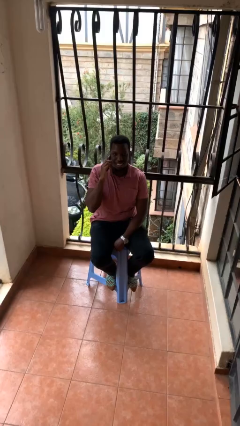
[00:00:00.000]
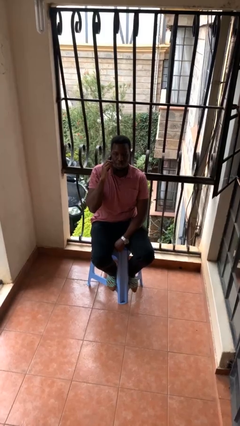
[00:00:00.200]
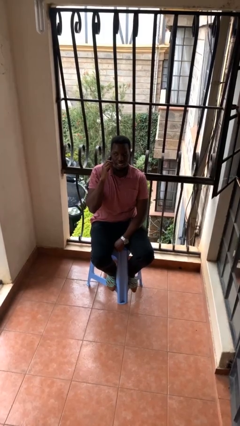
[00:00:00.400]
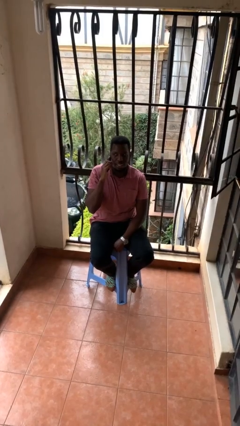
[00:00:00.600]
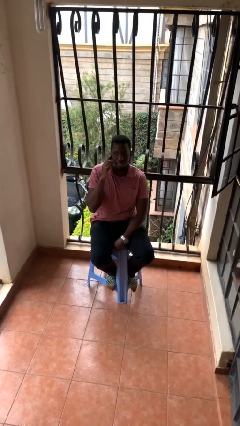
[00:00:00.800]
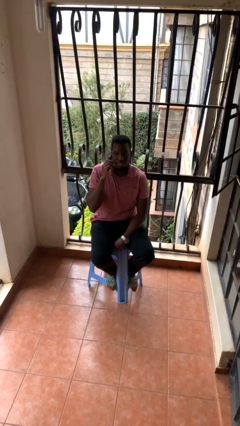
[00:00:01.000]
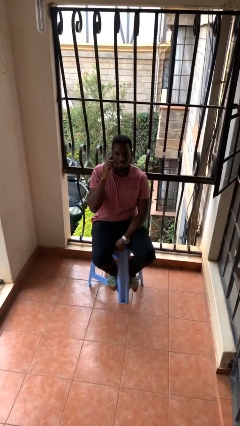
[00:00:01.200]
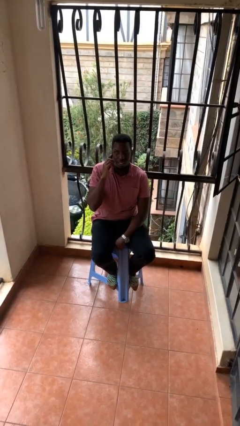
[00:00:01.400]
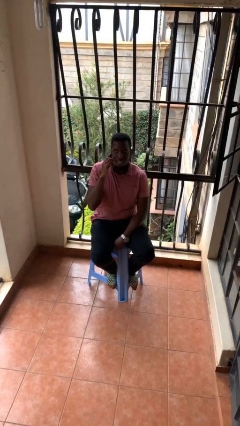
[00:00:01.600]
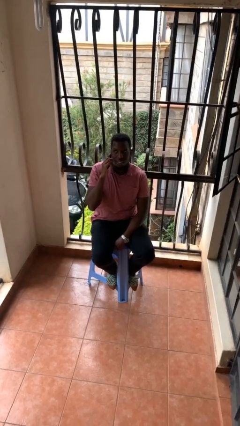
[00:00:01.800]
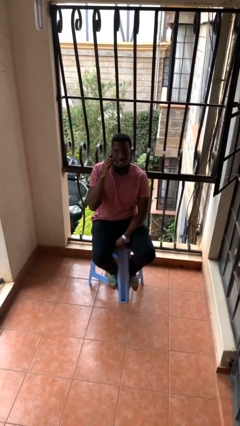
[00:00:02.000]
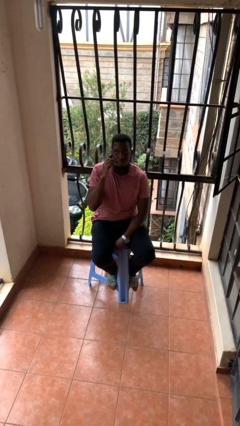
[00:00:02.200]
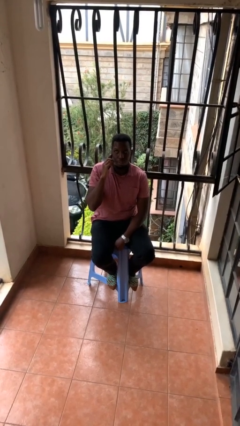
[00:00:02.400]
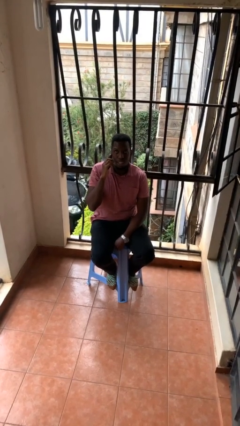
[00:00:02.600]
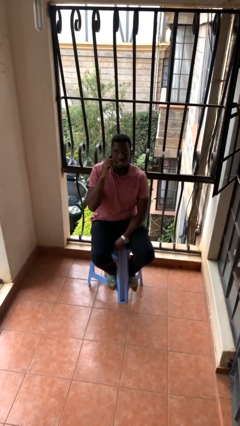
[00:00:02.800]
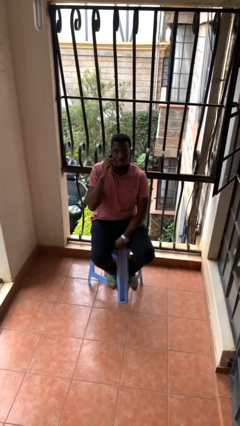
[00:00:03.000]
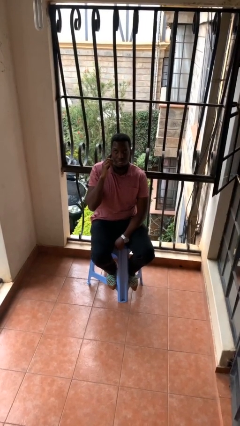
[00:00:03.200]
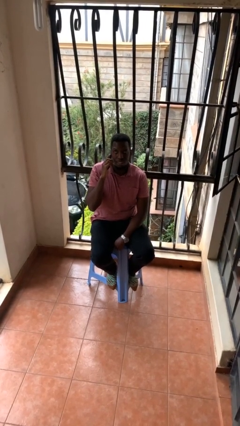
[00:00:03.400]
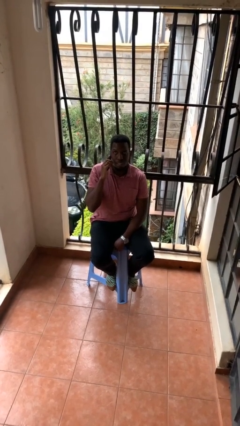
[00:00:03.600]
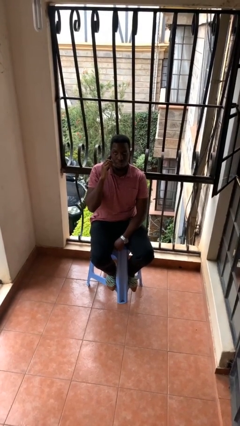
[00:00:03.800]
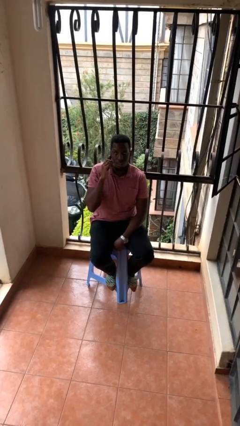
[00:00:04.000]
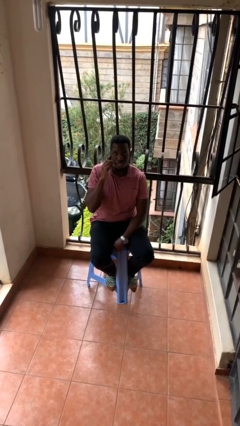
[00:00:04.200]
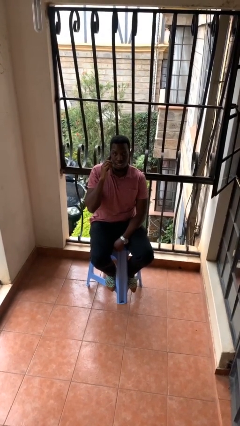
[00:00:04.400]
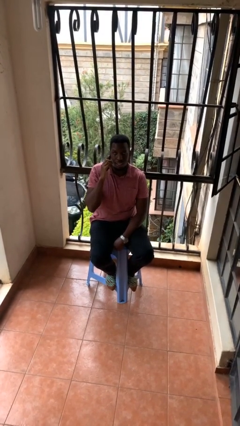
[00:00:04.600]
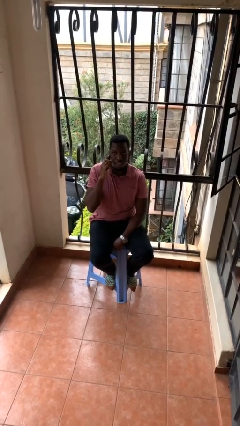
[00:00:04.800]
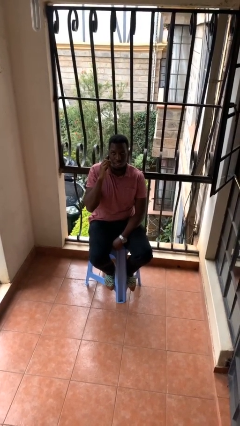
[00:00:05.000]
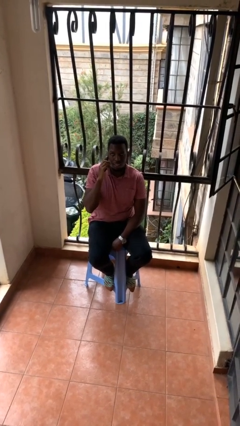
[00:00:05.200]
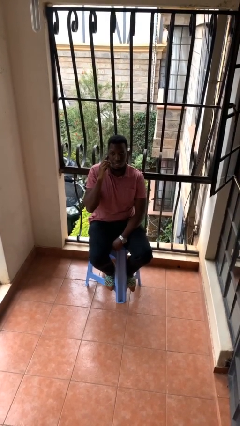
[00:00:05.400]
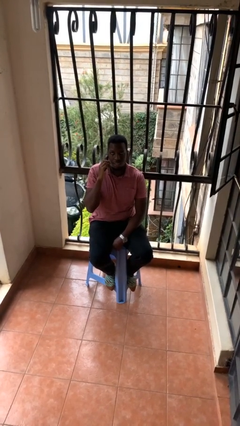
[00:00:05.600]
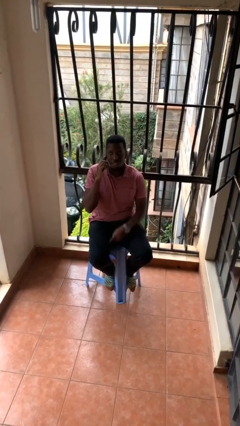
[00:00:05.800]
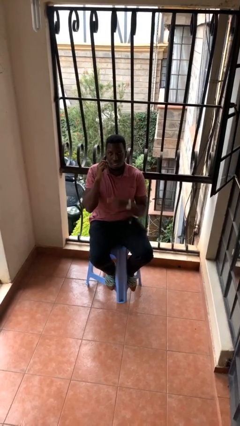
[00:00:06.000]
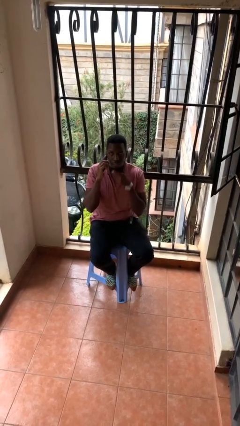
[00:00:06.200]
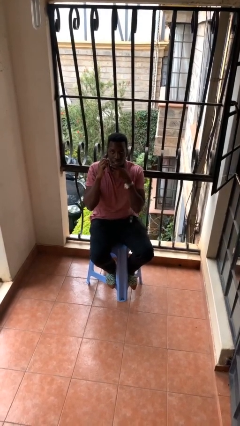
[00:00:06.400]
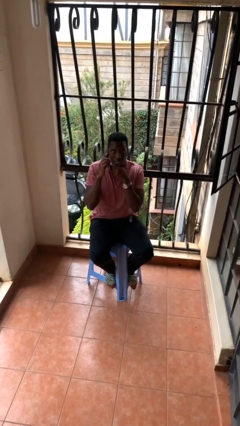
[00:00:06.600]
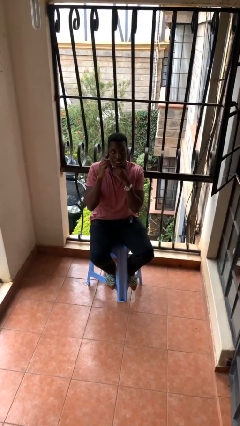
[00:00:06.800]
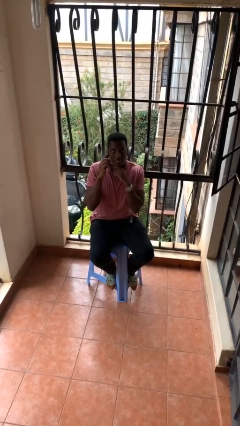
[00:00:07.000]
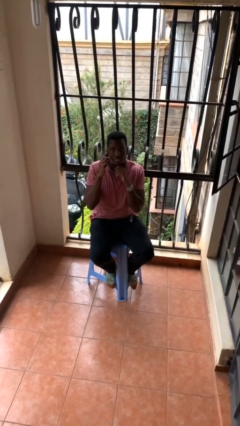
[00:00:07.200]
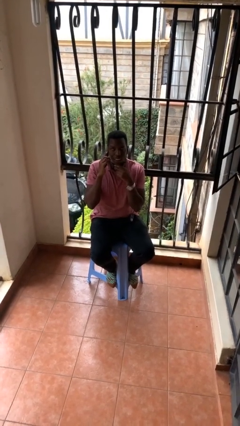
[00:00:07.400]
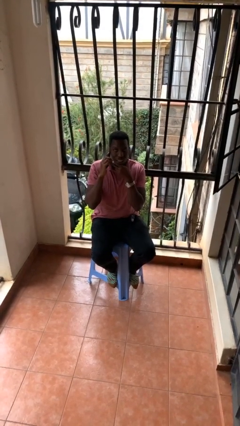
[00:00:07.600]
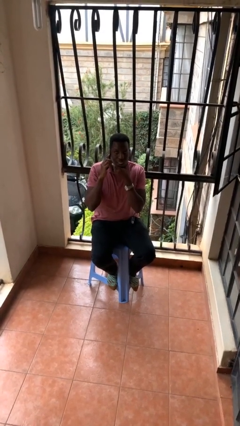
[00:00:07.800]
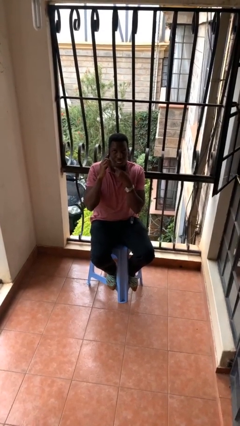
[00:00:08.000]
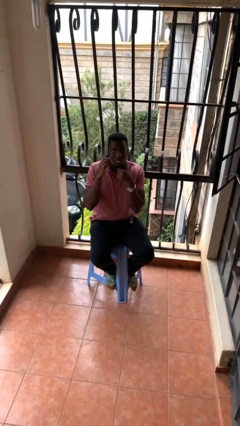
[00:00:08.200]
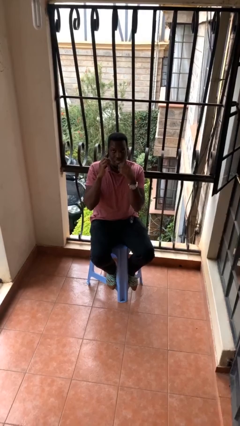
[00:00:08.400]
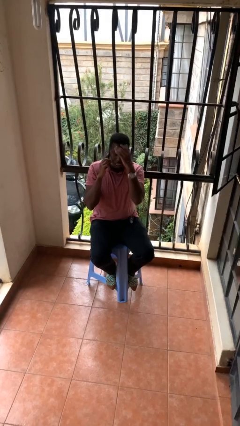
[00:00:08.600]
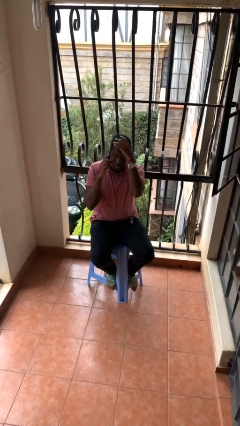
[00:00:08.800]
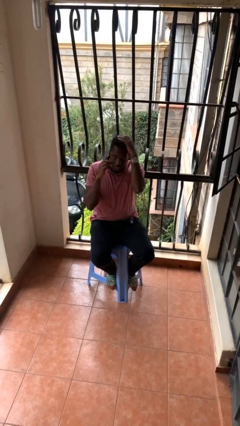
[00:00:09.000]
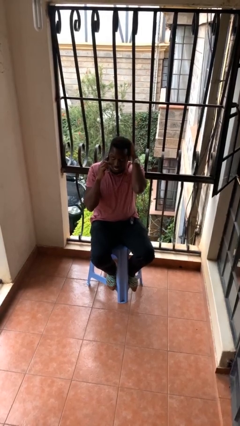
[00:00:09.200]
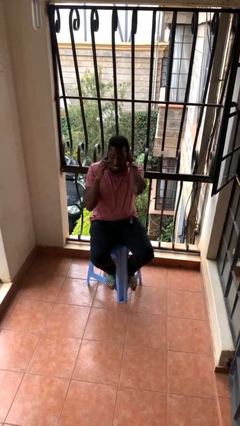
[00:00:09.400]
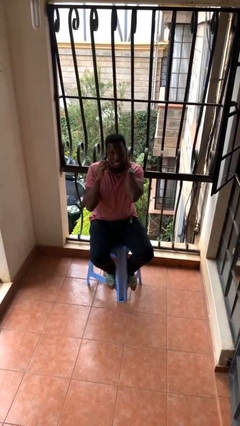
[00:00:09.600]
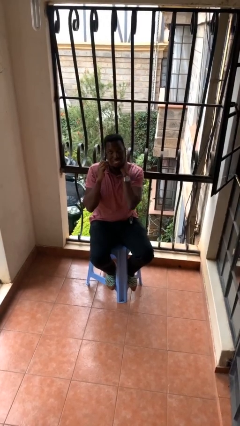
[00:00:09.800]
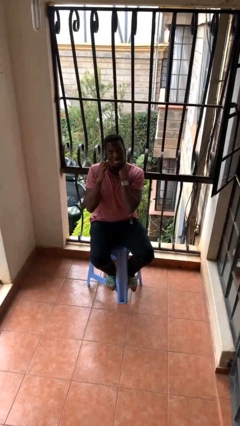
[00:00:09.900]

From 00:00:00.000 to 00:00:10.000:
person talks on phone

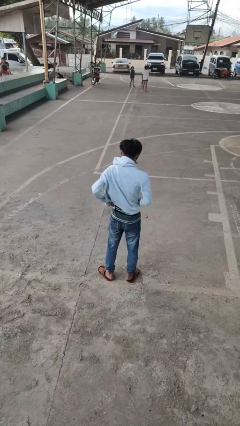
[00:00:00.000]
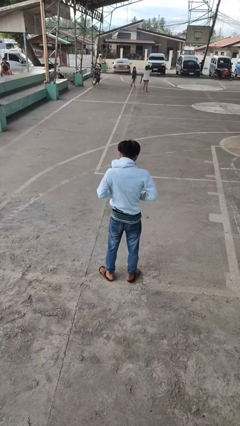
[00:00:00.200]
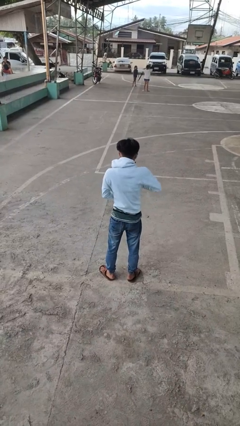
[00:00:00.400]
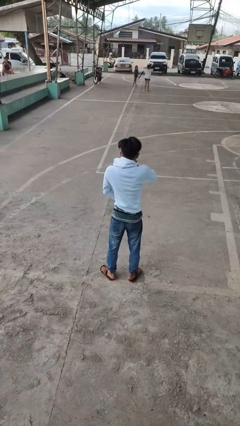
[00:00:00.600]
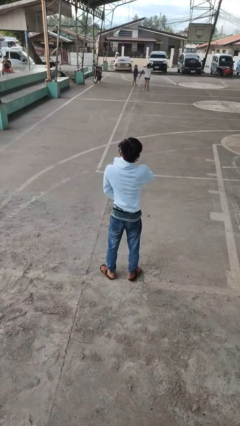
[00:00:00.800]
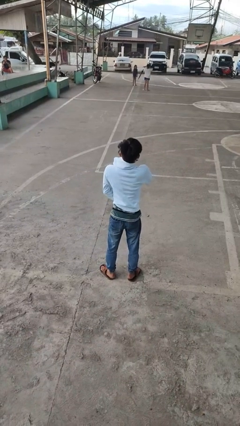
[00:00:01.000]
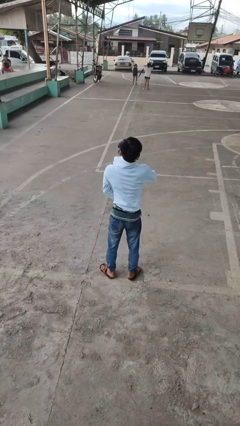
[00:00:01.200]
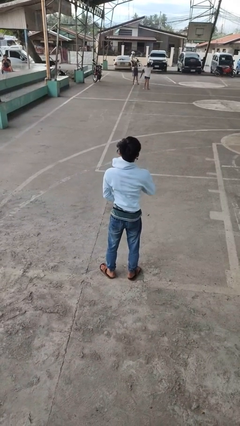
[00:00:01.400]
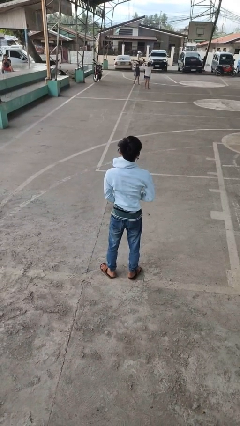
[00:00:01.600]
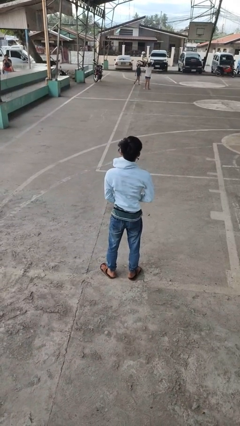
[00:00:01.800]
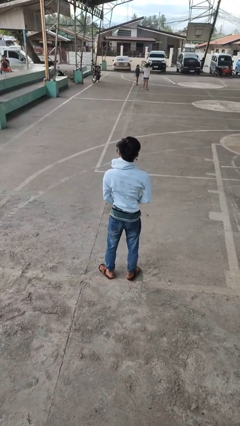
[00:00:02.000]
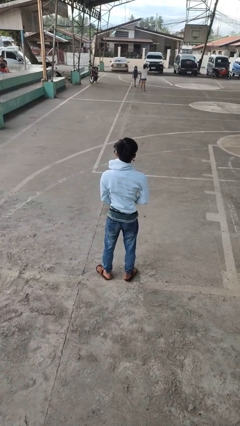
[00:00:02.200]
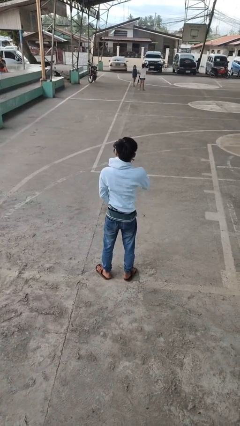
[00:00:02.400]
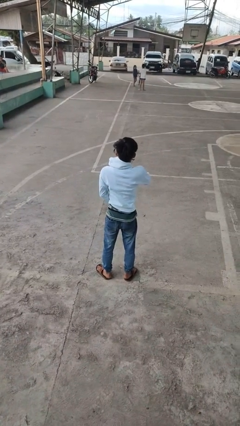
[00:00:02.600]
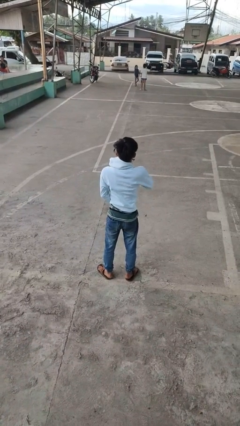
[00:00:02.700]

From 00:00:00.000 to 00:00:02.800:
person zips up jacket

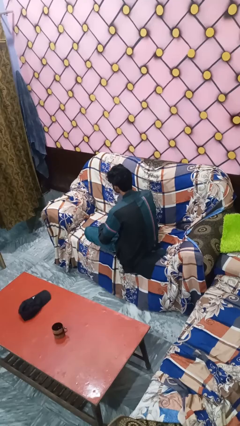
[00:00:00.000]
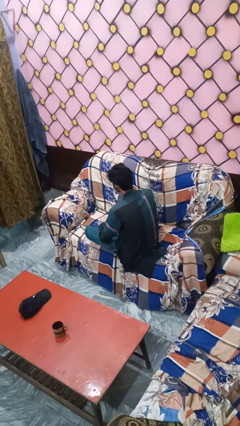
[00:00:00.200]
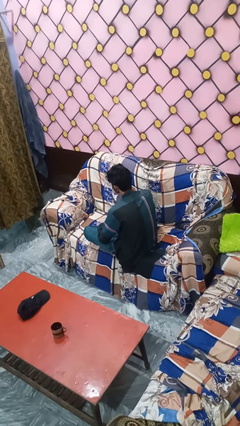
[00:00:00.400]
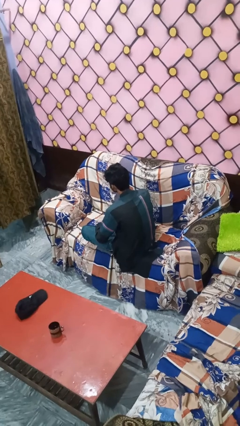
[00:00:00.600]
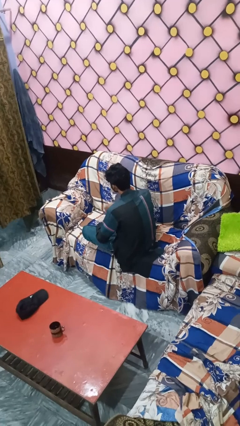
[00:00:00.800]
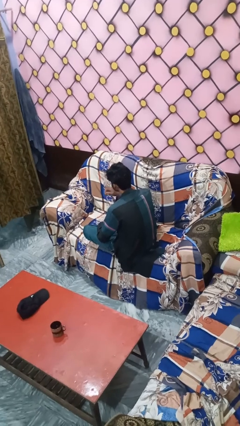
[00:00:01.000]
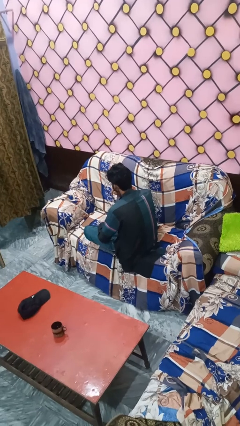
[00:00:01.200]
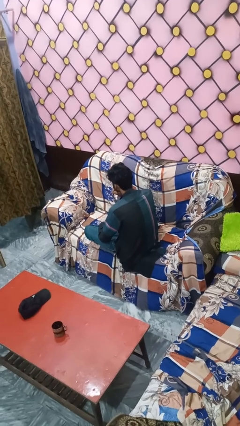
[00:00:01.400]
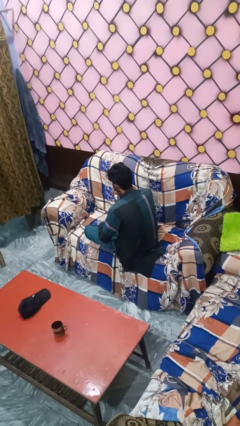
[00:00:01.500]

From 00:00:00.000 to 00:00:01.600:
person gestures be quiet

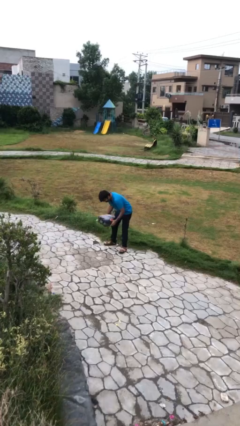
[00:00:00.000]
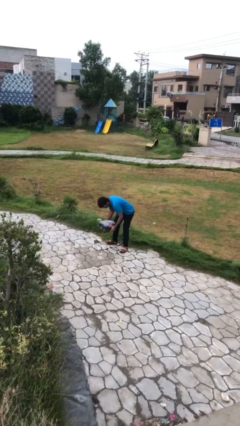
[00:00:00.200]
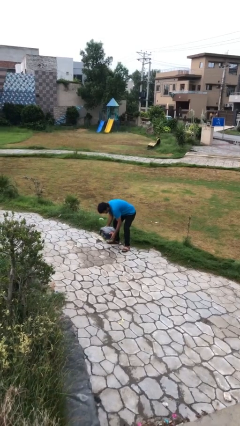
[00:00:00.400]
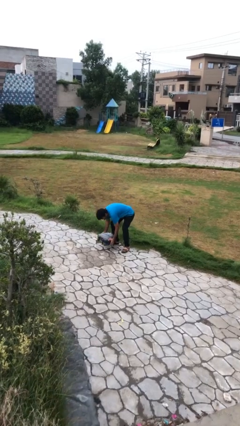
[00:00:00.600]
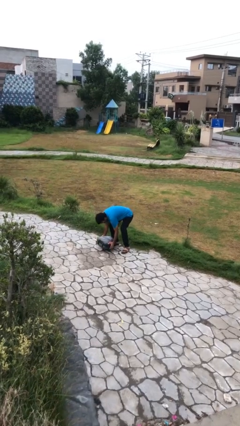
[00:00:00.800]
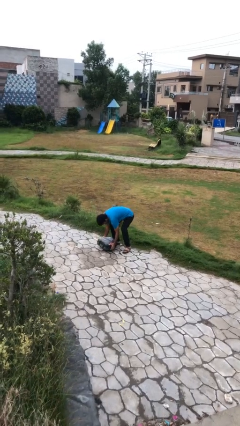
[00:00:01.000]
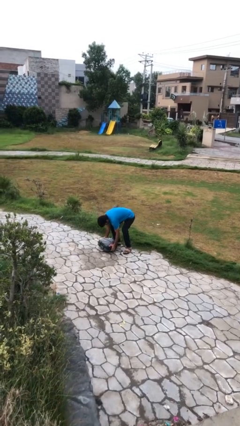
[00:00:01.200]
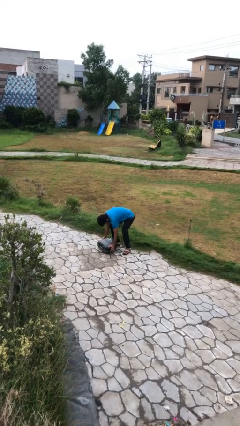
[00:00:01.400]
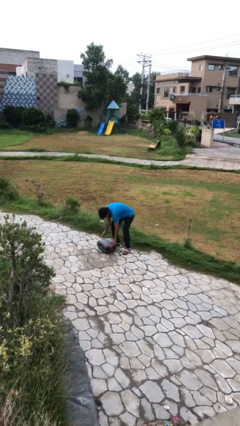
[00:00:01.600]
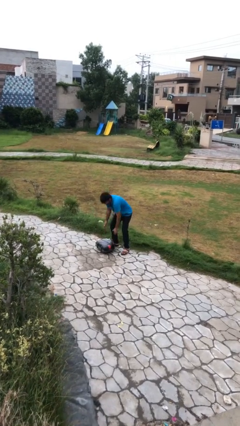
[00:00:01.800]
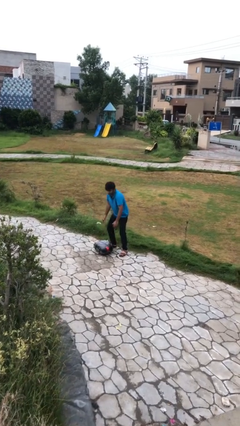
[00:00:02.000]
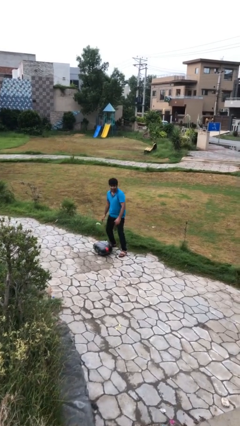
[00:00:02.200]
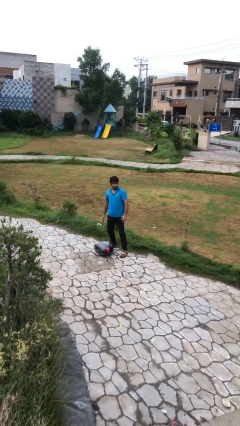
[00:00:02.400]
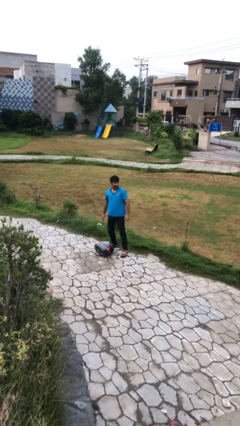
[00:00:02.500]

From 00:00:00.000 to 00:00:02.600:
person puts down object on floor

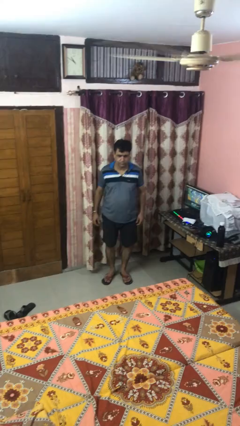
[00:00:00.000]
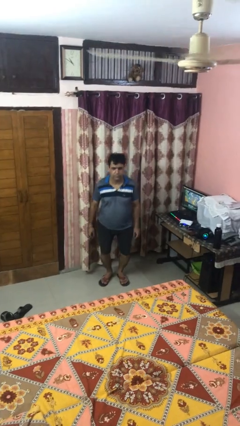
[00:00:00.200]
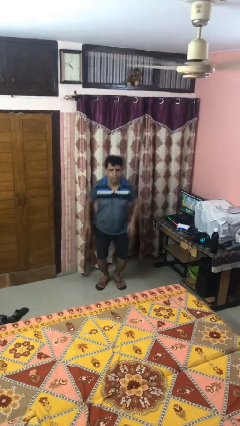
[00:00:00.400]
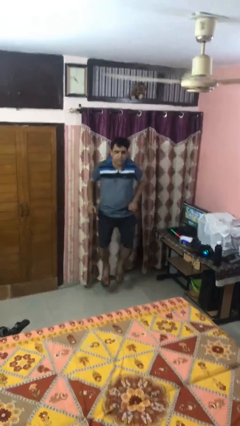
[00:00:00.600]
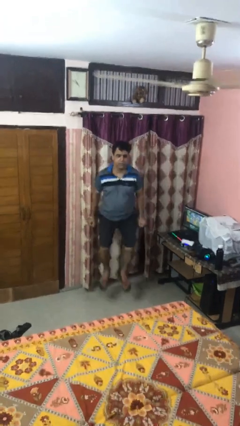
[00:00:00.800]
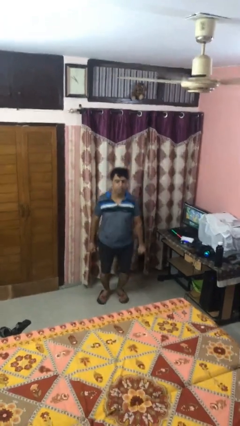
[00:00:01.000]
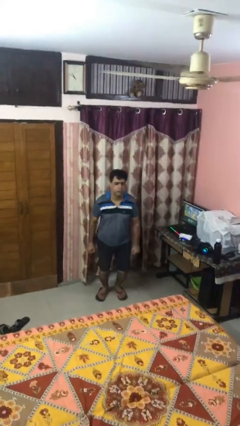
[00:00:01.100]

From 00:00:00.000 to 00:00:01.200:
person jumps
